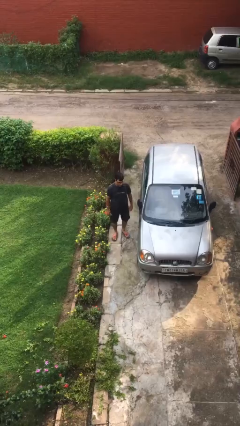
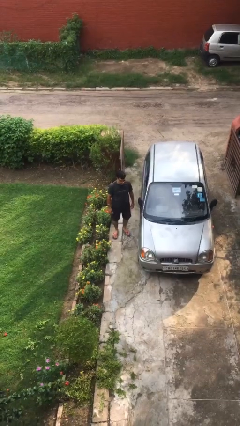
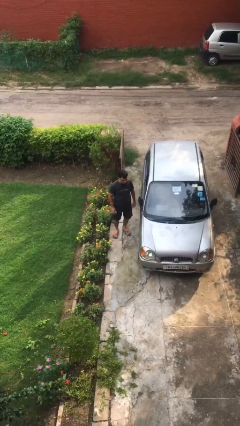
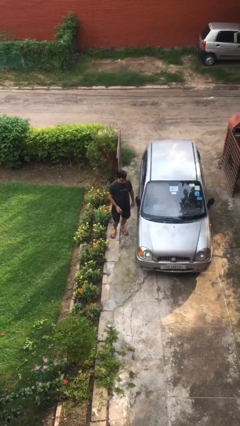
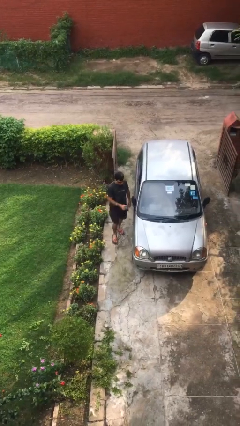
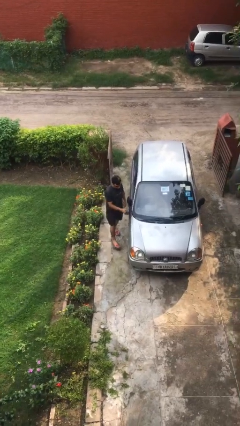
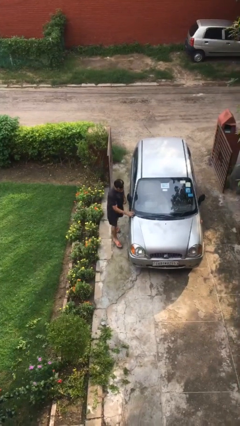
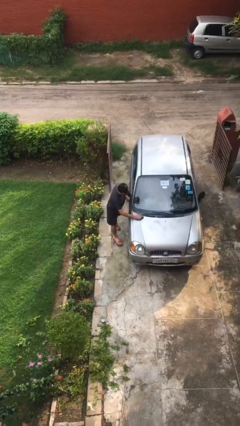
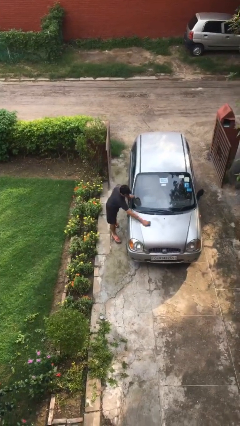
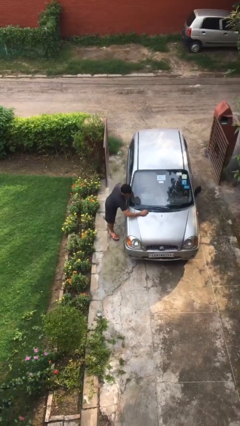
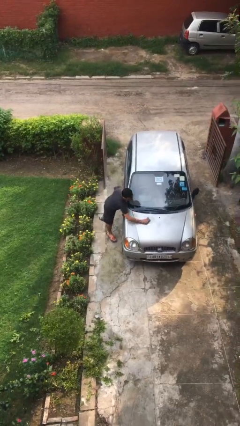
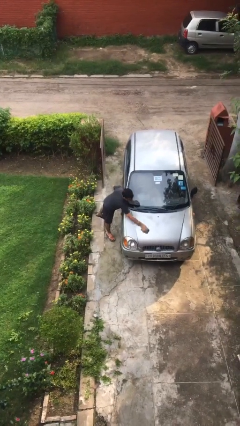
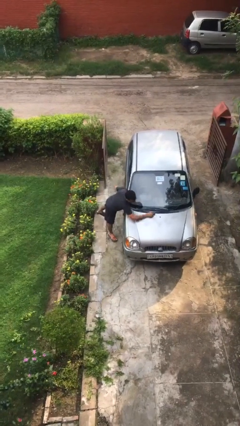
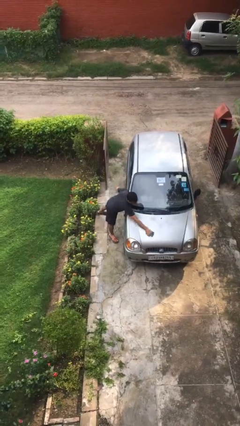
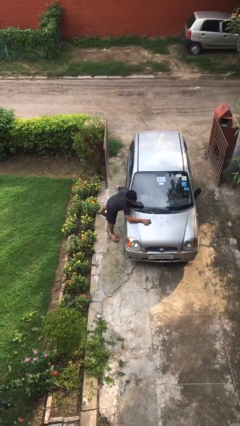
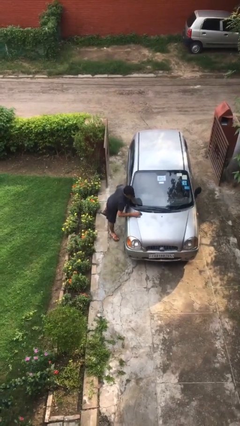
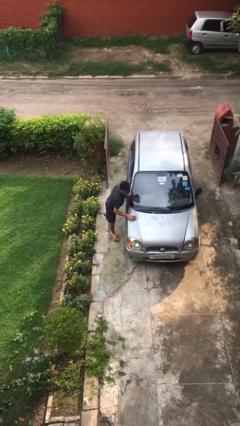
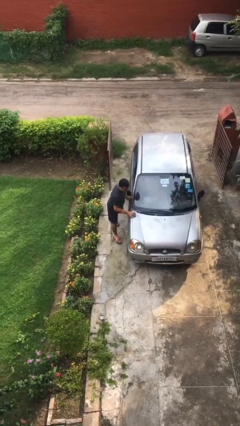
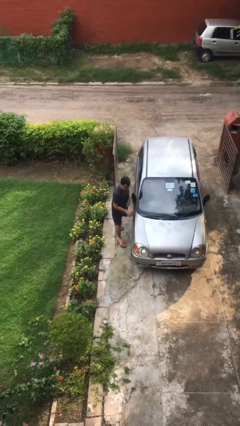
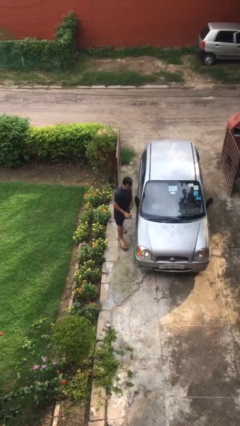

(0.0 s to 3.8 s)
person polishes car with rag

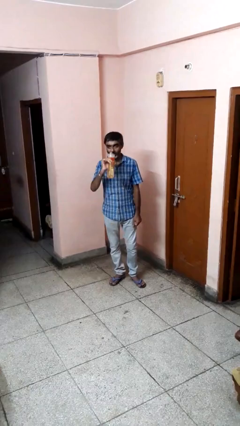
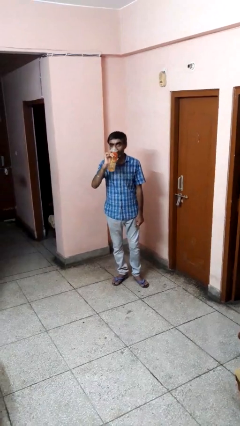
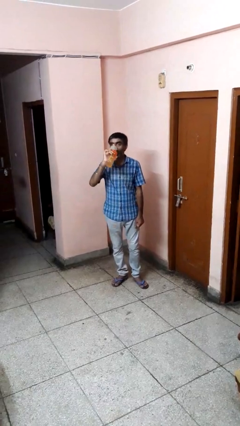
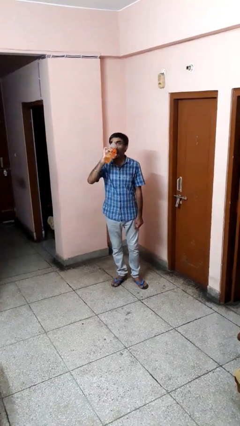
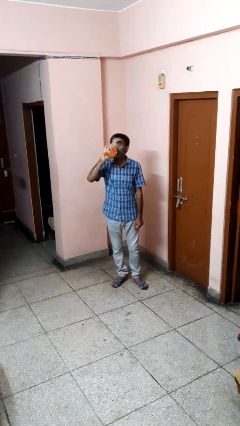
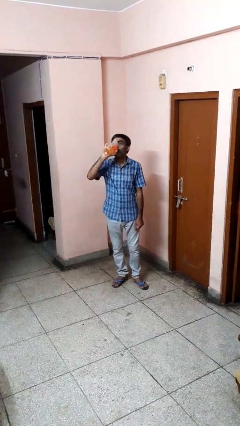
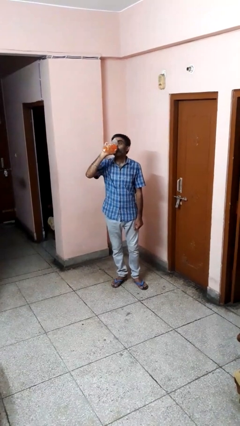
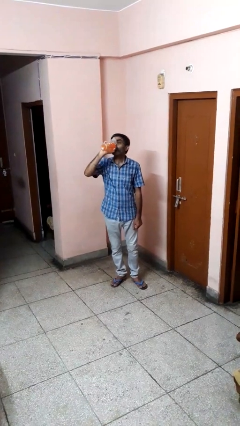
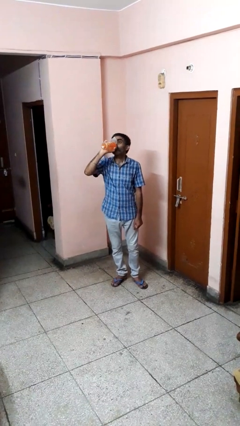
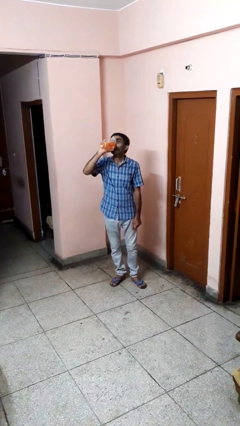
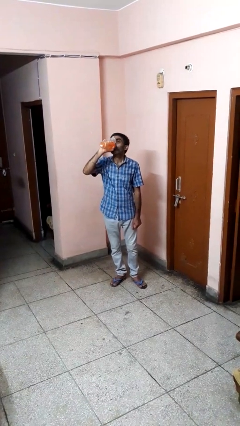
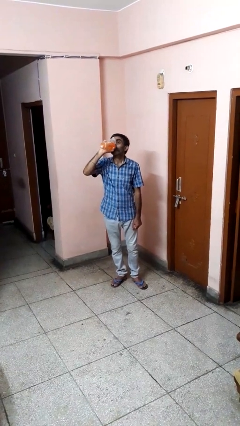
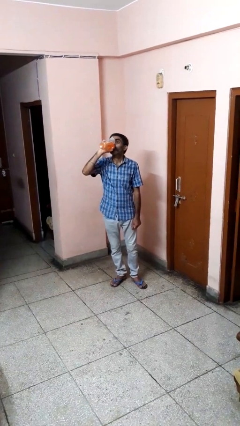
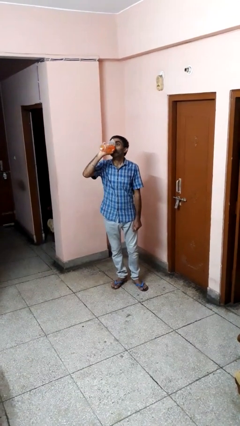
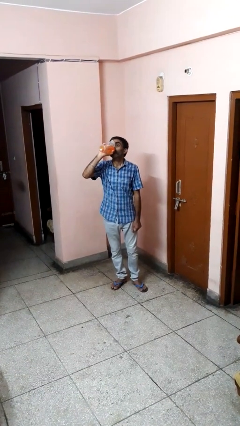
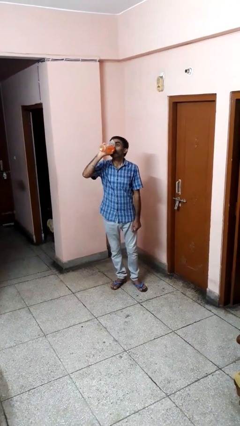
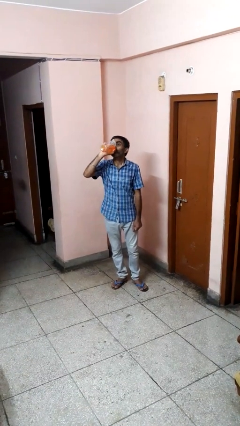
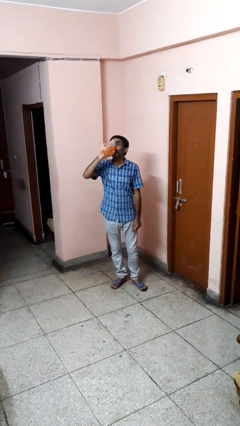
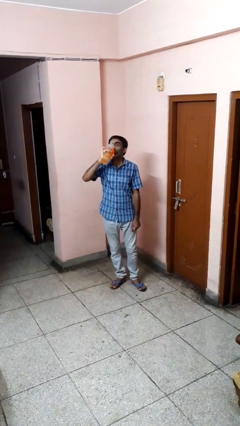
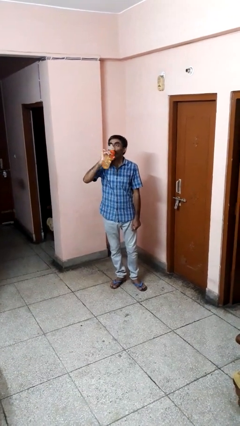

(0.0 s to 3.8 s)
person drinks from bottle

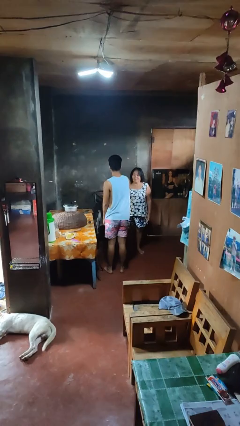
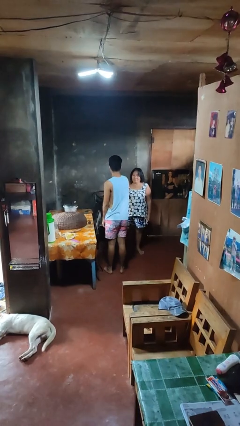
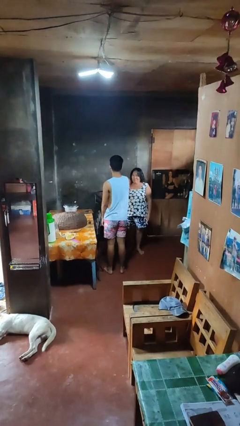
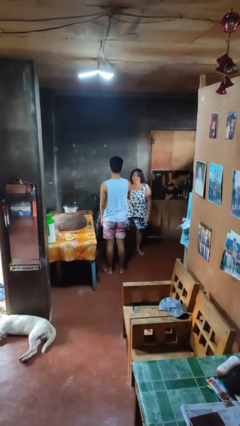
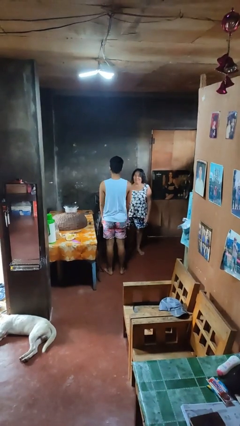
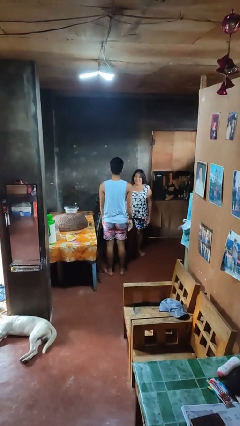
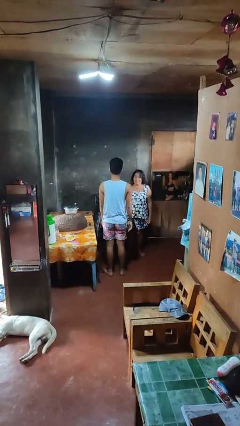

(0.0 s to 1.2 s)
person shoves person

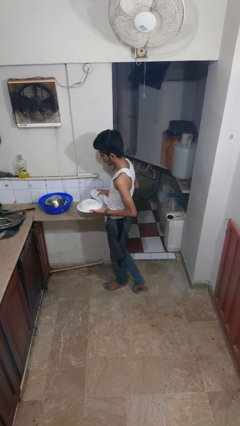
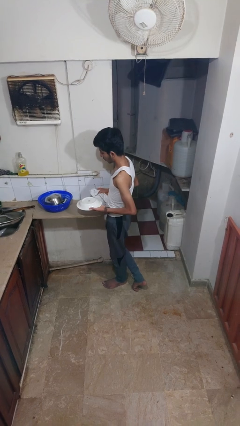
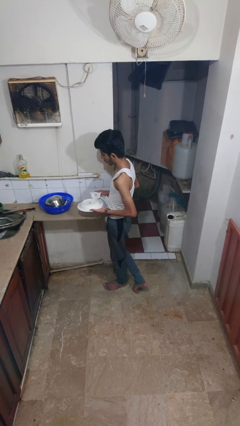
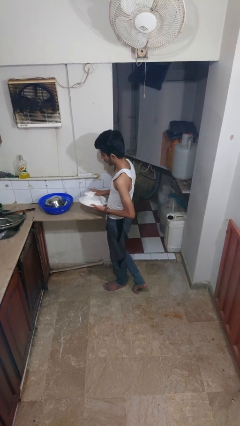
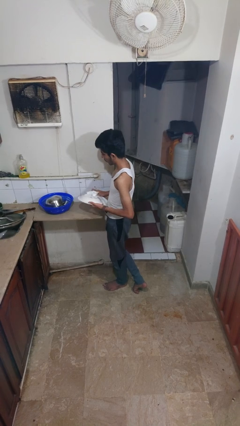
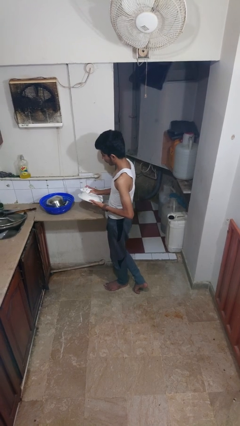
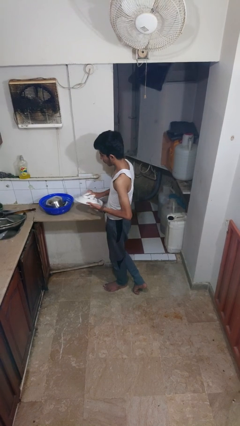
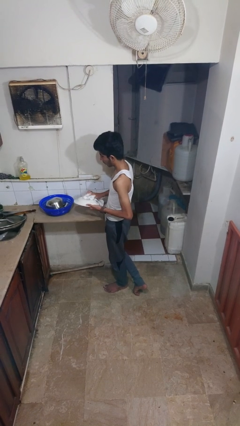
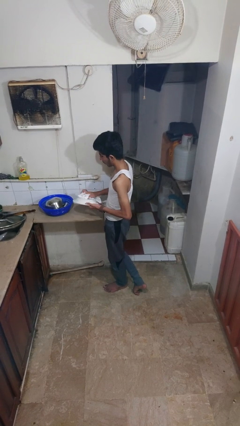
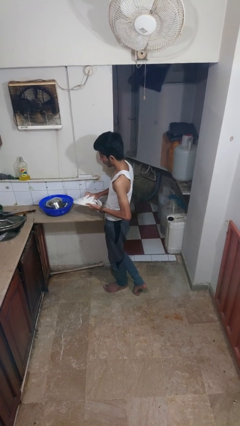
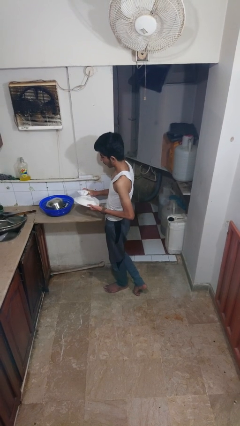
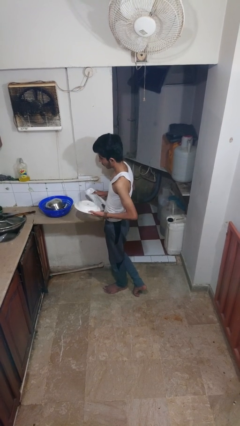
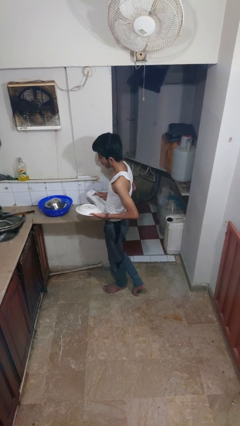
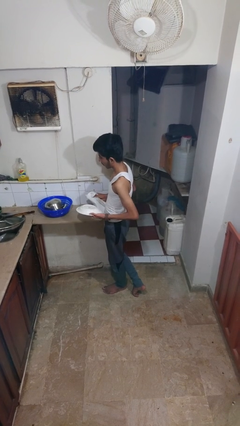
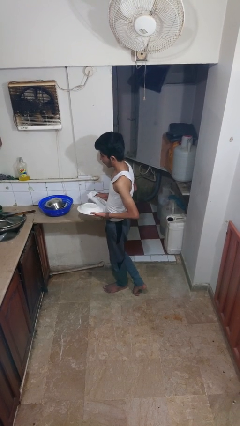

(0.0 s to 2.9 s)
person dries dish

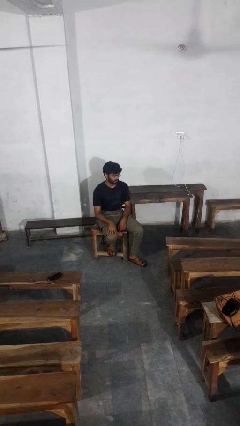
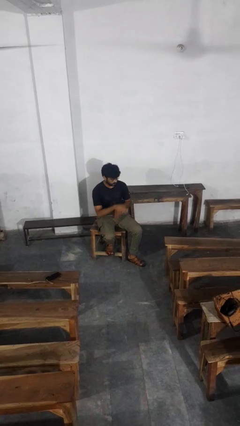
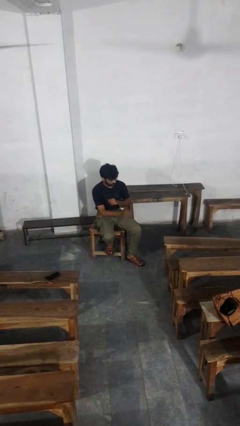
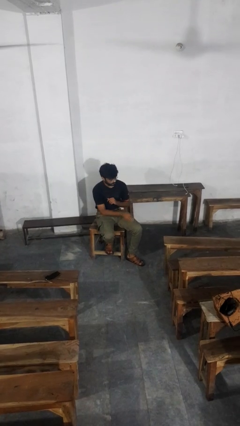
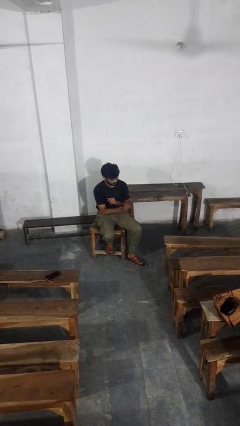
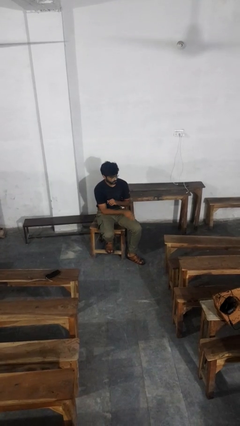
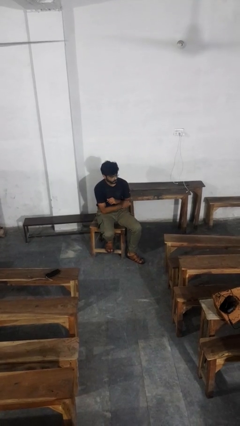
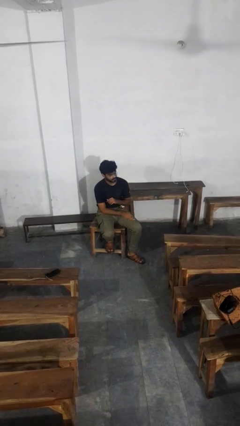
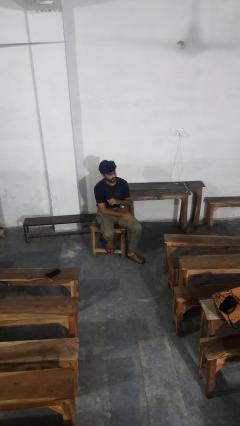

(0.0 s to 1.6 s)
person slaps hands on thighs

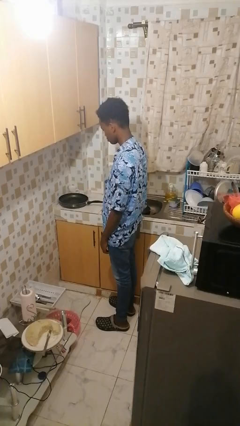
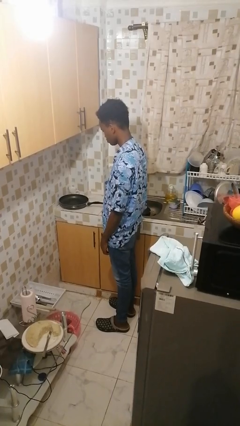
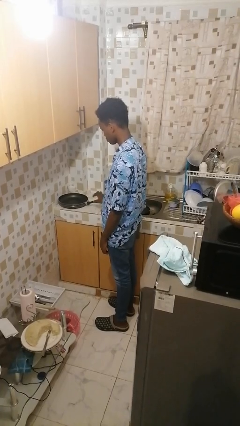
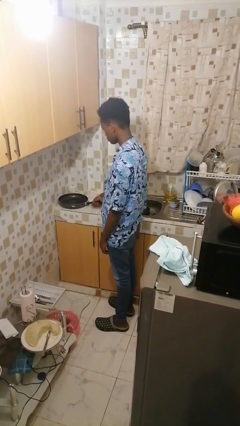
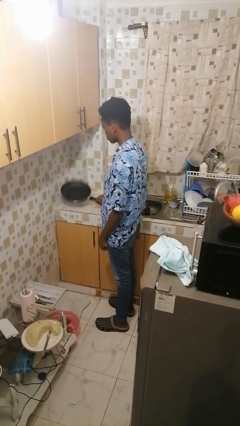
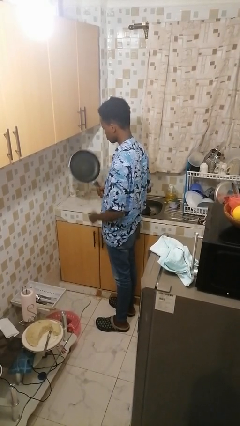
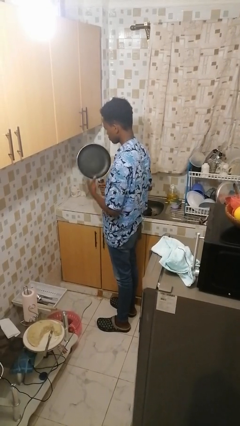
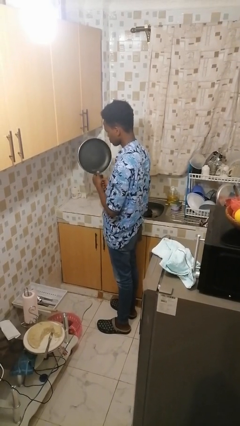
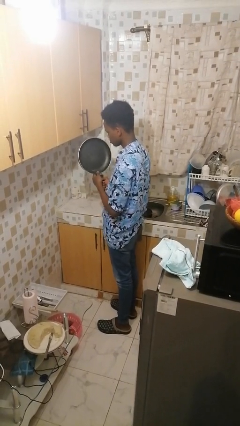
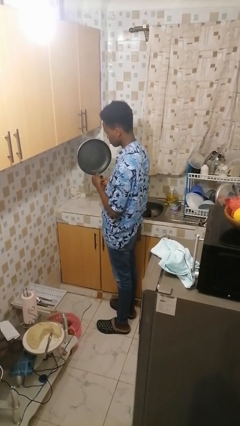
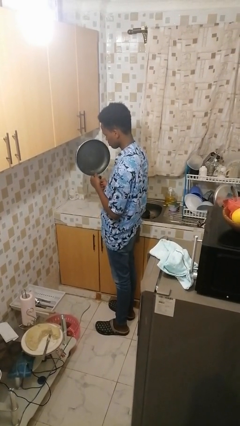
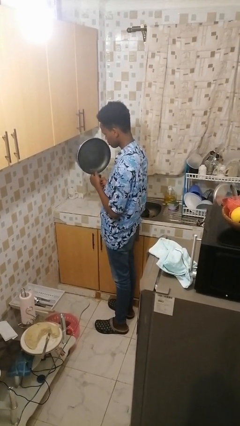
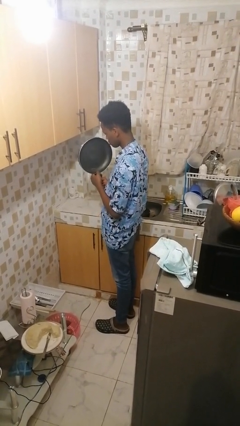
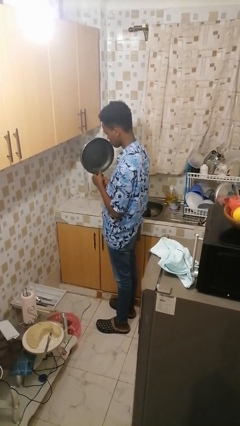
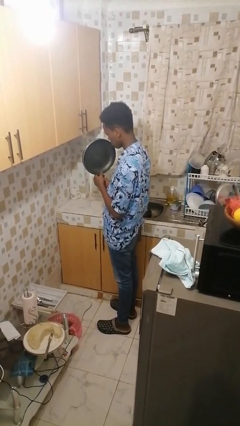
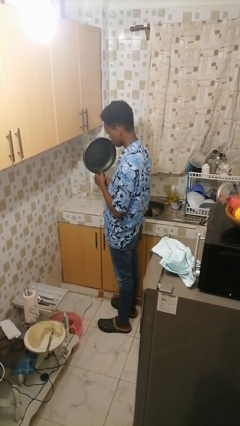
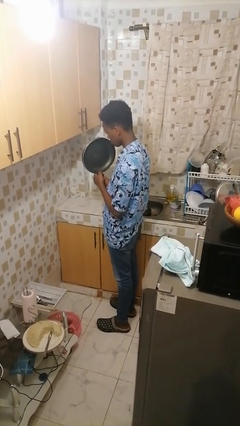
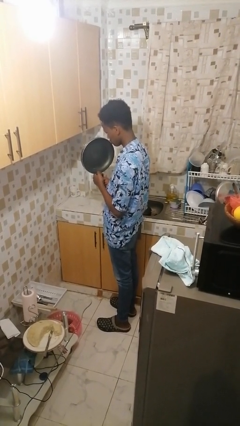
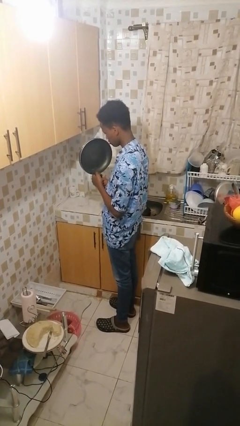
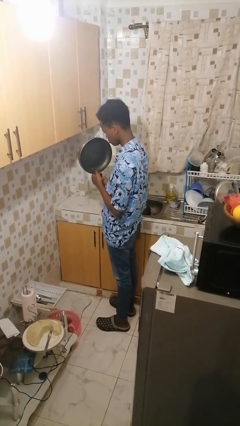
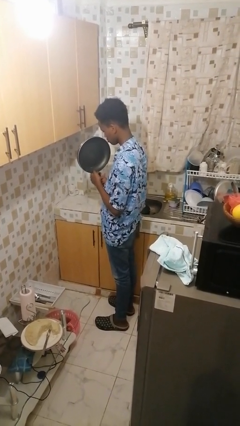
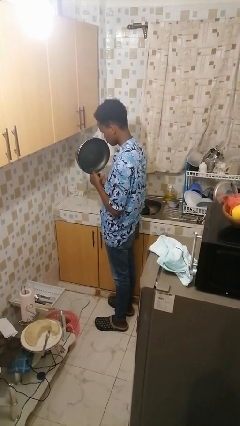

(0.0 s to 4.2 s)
person picks up object from countertop

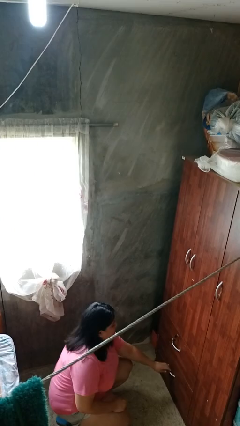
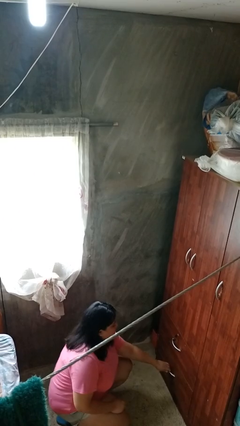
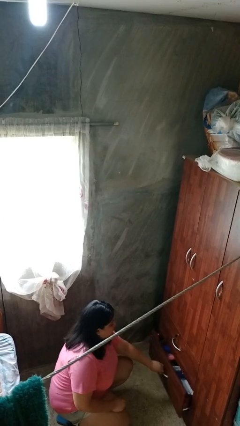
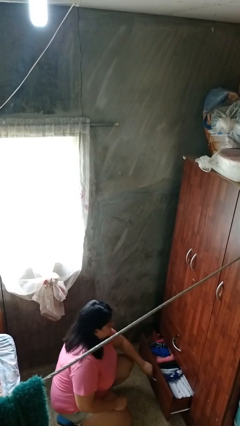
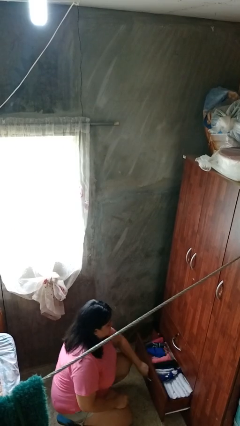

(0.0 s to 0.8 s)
person opens dresser drawer
